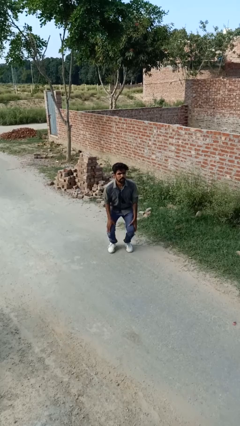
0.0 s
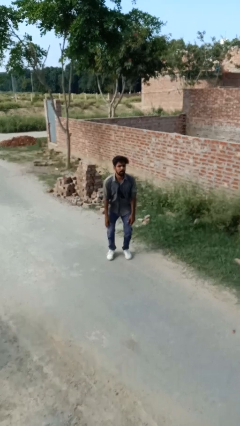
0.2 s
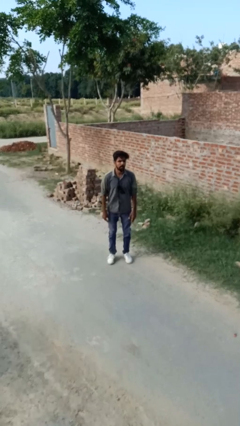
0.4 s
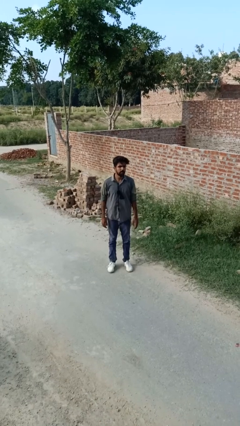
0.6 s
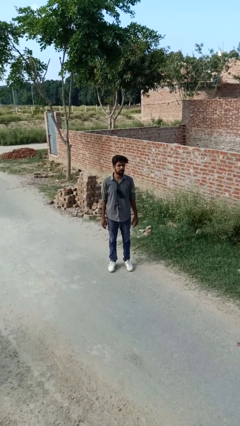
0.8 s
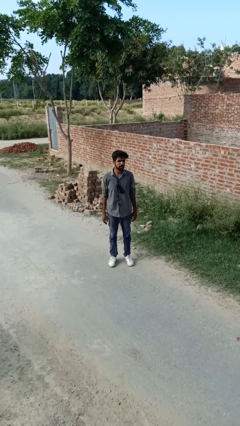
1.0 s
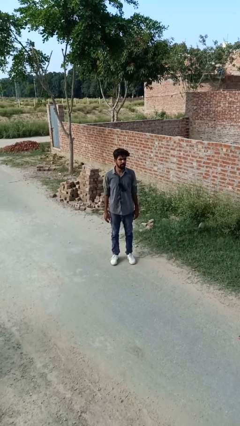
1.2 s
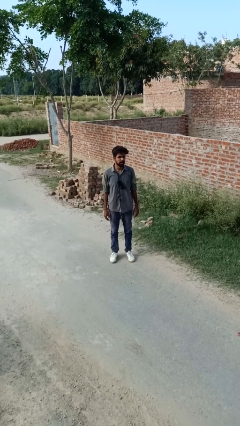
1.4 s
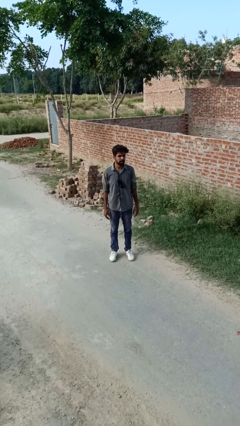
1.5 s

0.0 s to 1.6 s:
person stands up from floor

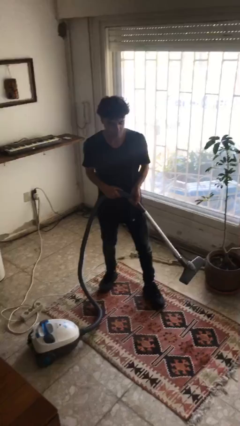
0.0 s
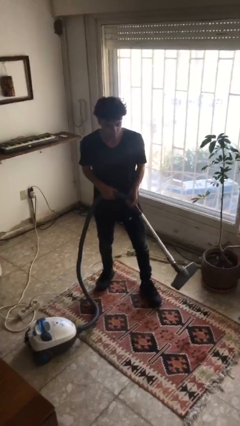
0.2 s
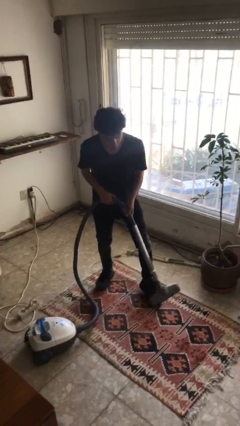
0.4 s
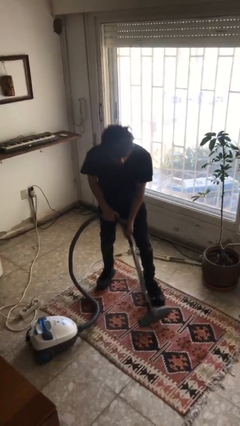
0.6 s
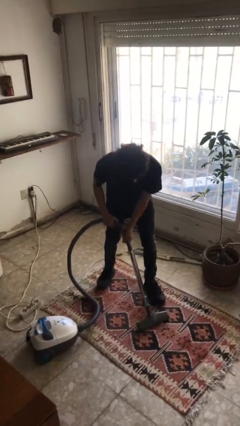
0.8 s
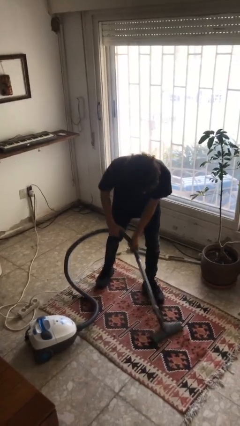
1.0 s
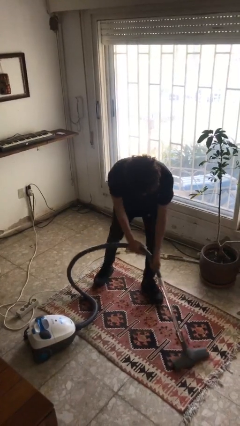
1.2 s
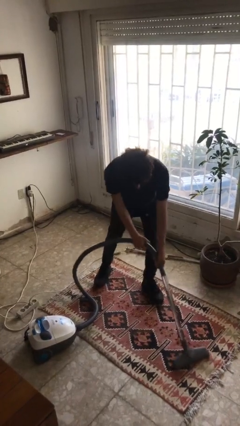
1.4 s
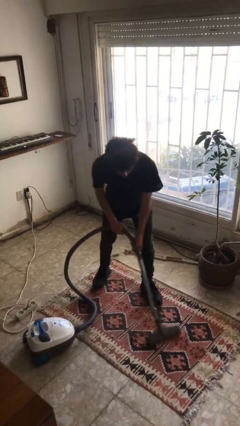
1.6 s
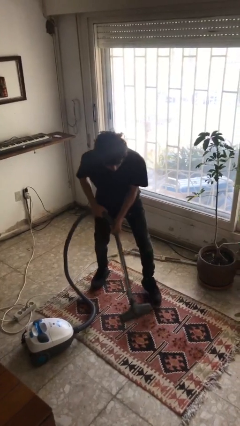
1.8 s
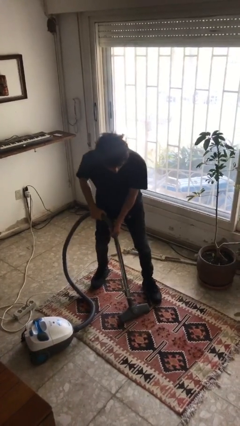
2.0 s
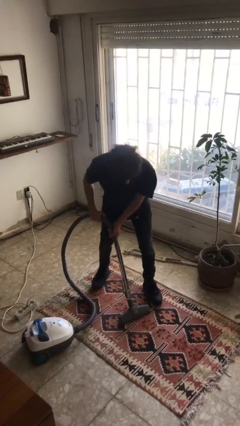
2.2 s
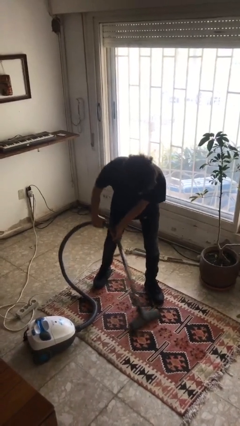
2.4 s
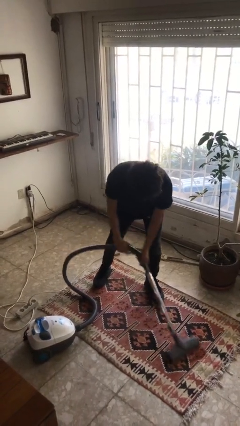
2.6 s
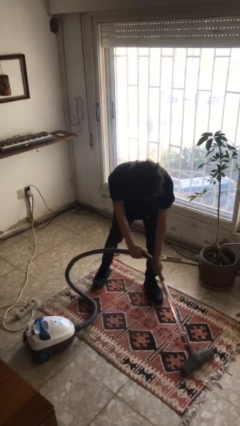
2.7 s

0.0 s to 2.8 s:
person vacuums carpet

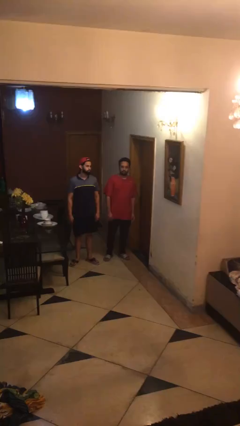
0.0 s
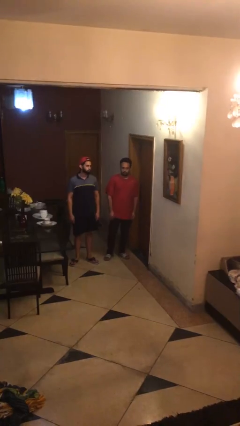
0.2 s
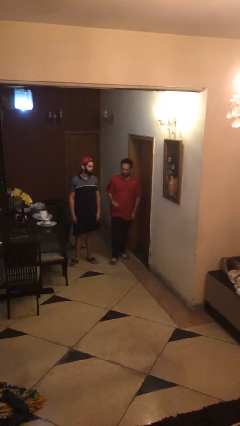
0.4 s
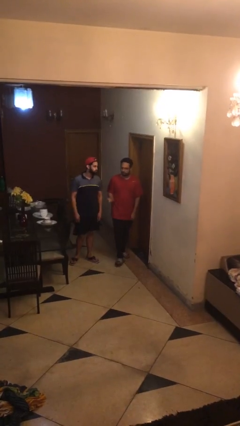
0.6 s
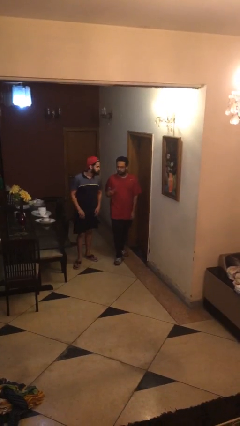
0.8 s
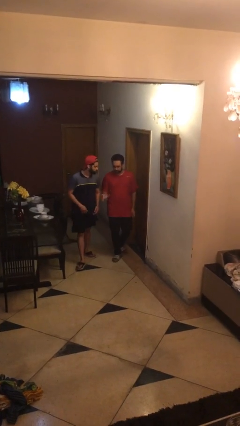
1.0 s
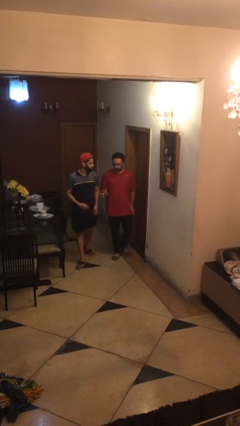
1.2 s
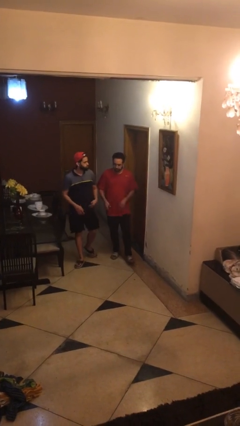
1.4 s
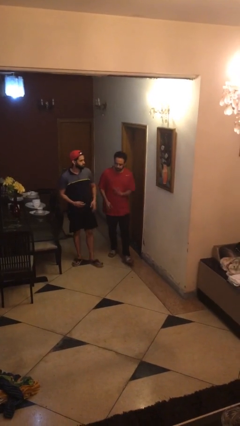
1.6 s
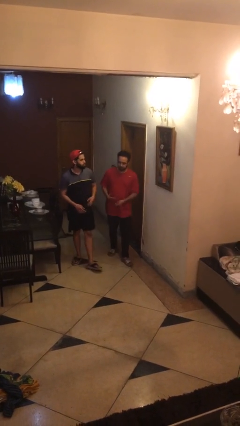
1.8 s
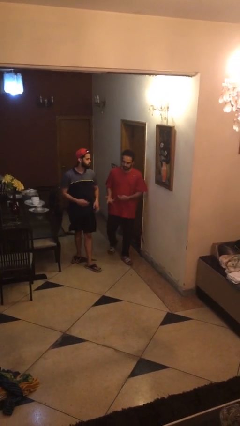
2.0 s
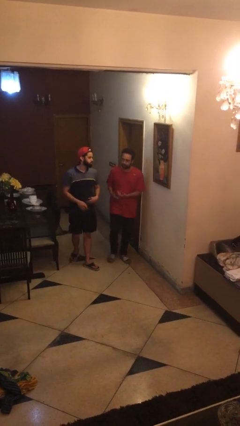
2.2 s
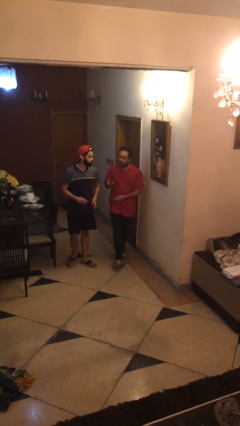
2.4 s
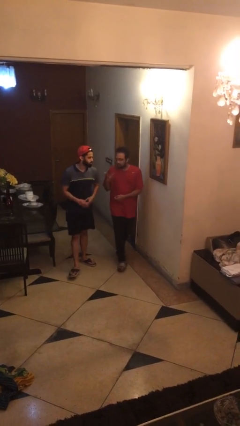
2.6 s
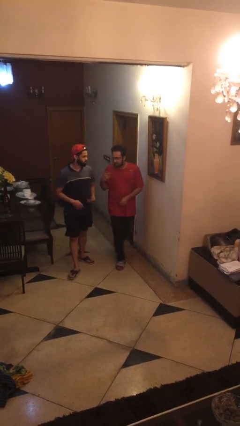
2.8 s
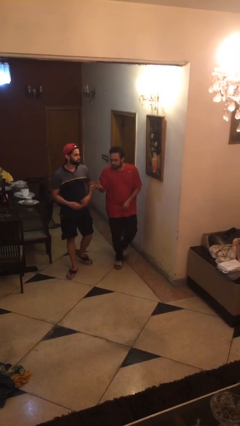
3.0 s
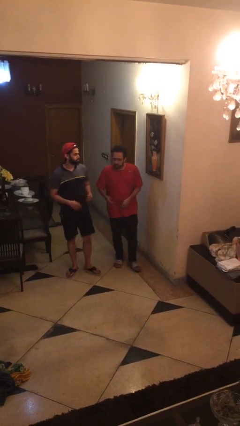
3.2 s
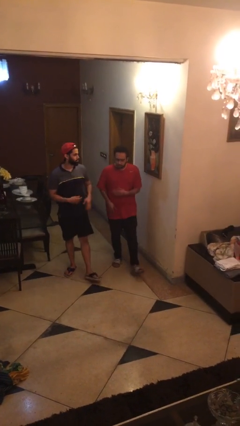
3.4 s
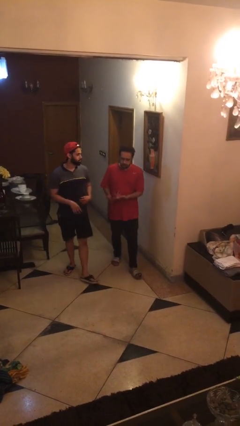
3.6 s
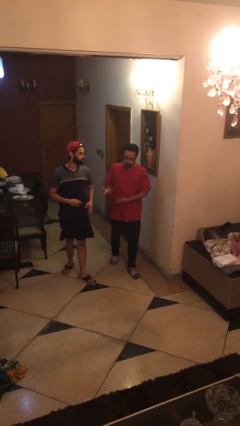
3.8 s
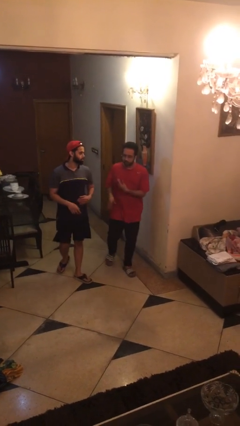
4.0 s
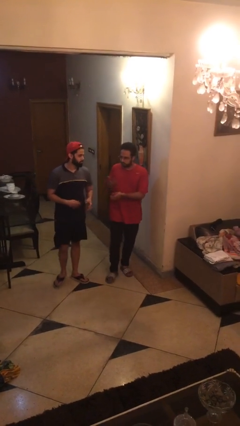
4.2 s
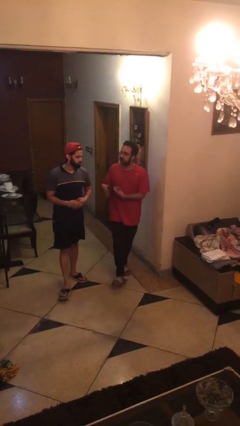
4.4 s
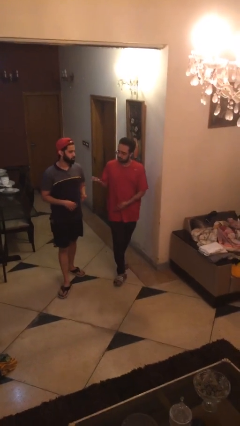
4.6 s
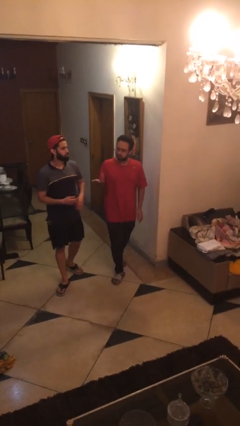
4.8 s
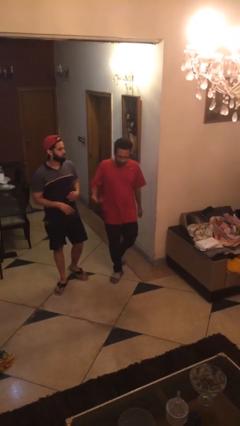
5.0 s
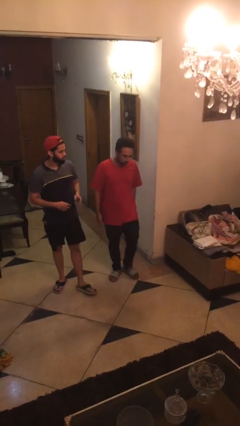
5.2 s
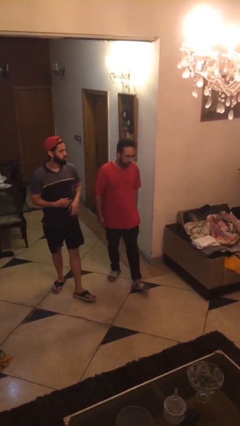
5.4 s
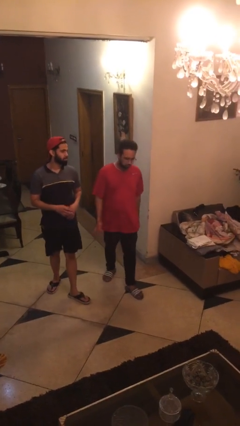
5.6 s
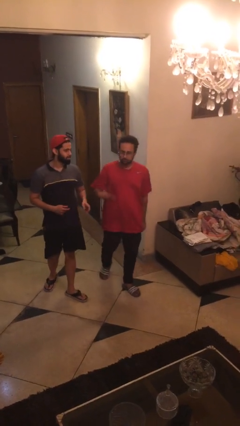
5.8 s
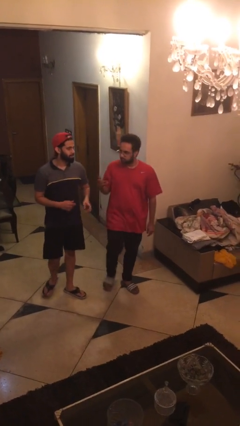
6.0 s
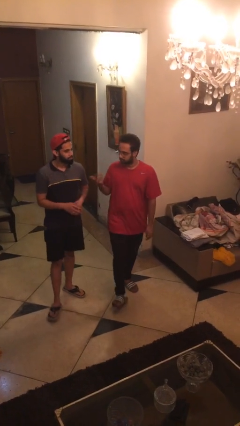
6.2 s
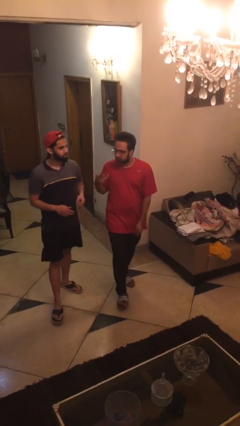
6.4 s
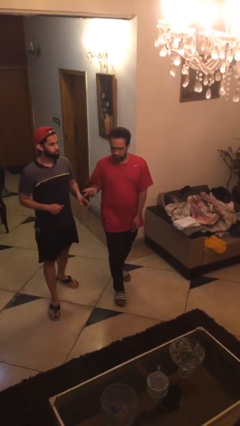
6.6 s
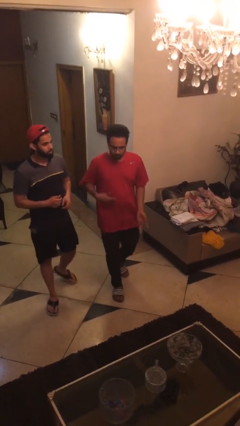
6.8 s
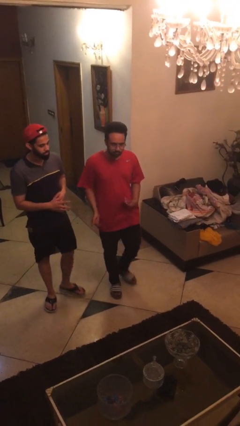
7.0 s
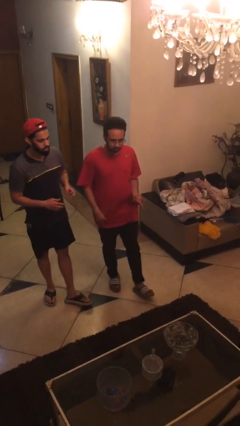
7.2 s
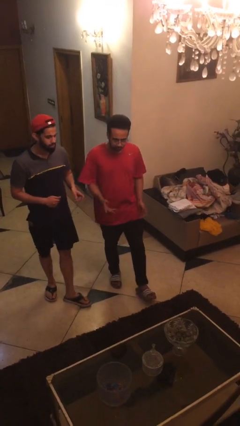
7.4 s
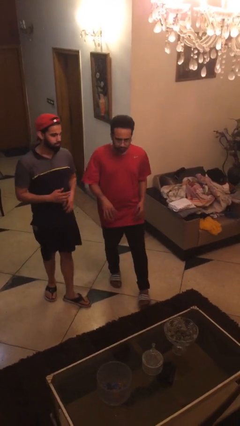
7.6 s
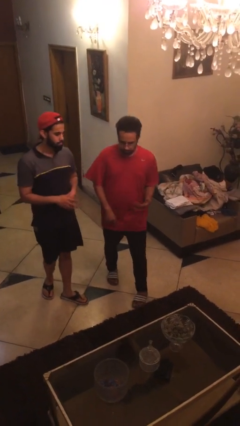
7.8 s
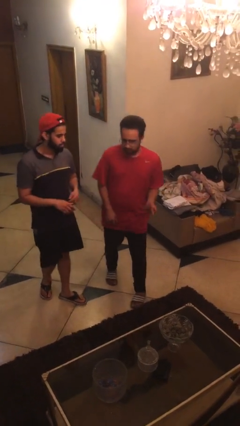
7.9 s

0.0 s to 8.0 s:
person talks to person

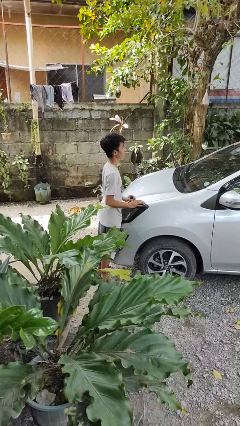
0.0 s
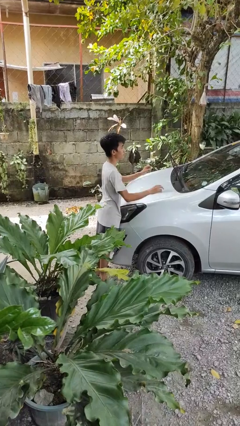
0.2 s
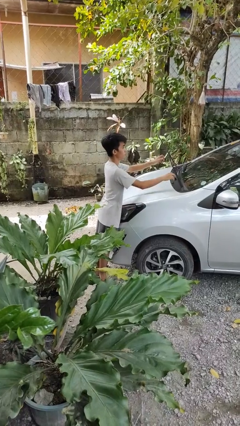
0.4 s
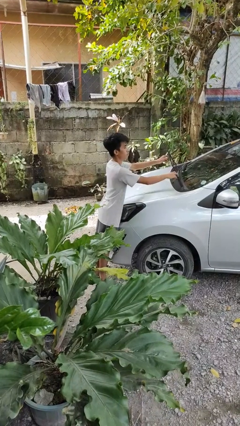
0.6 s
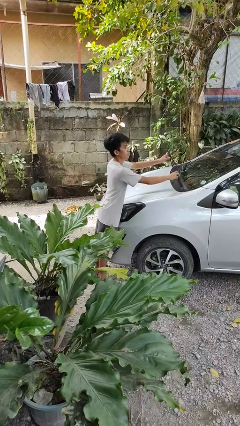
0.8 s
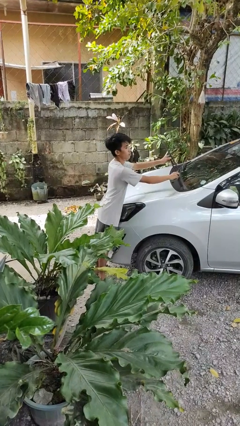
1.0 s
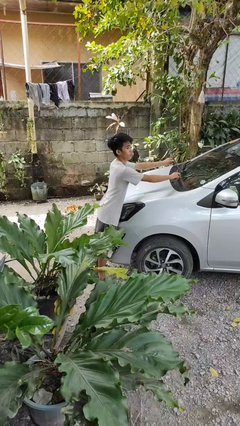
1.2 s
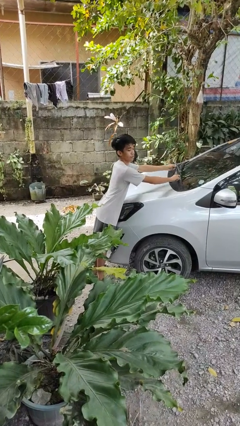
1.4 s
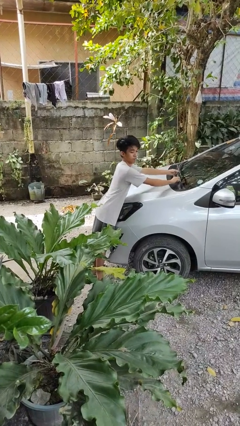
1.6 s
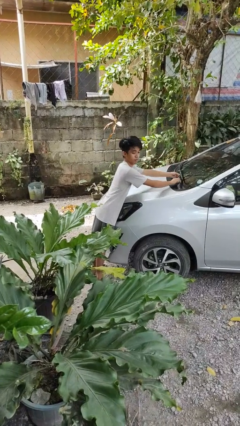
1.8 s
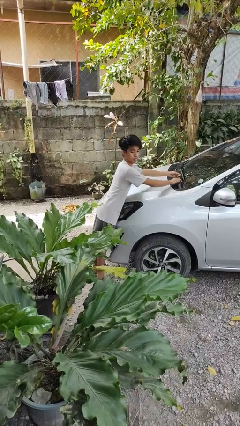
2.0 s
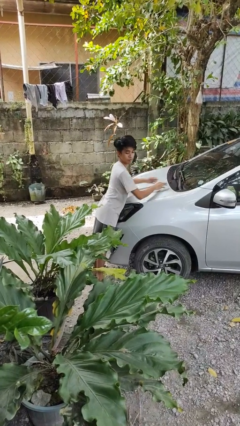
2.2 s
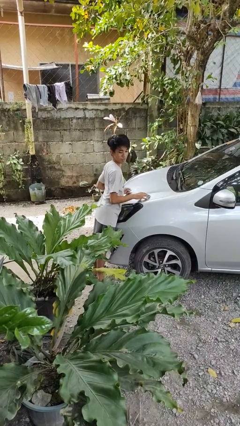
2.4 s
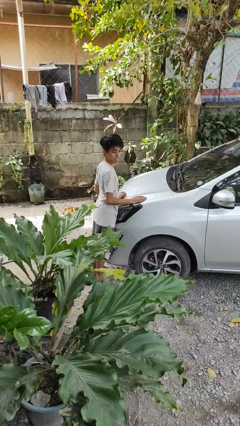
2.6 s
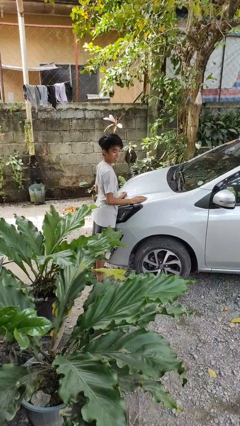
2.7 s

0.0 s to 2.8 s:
person flips down car wipers

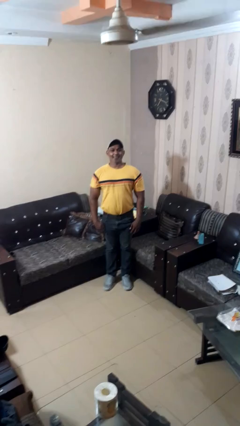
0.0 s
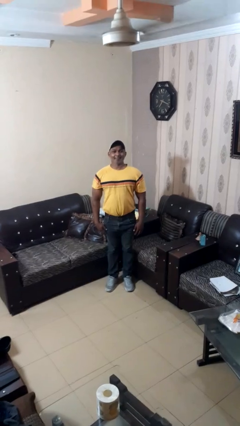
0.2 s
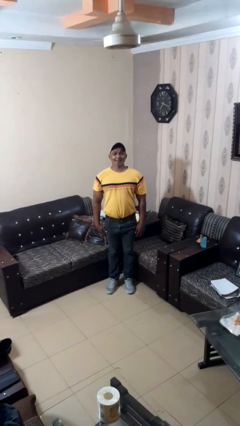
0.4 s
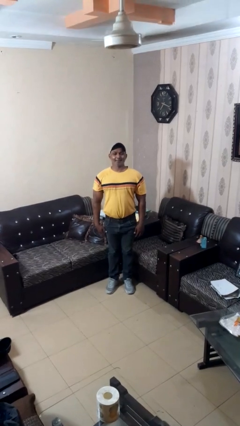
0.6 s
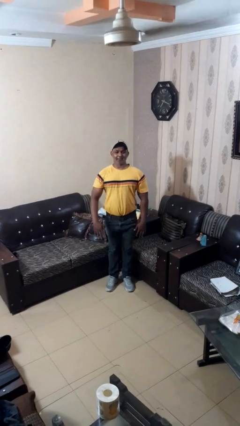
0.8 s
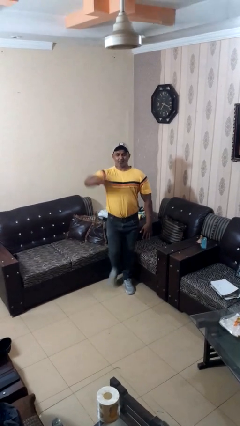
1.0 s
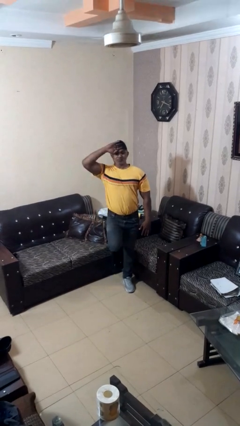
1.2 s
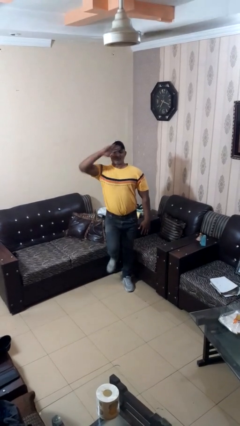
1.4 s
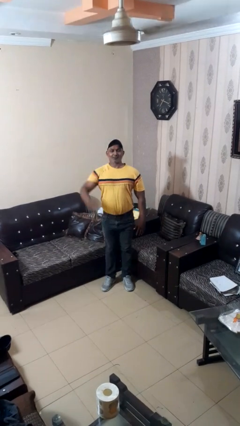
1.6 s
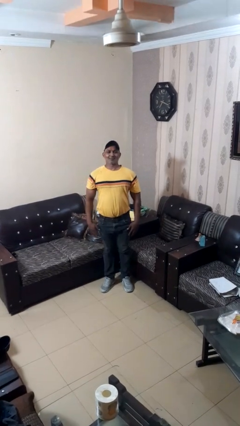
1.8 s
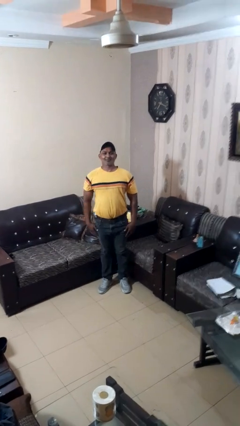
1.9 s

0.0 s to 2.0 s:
person salutes

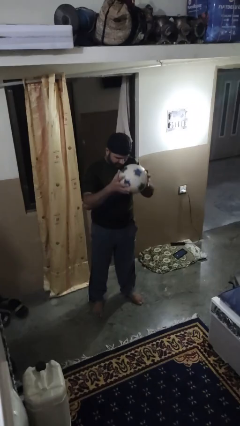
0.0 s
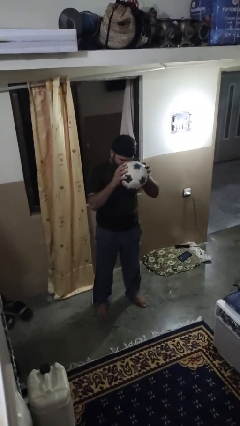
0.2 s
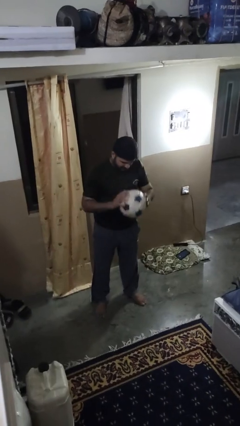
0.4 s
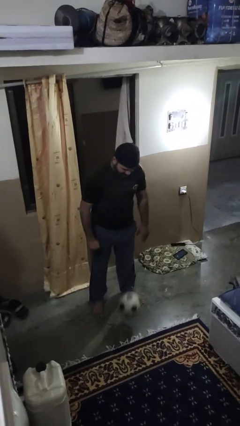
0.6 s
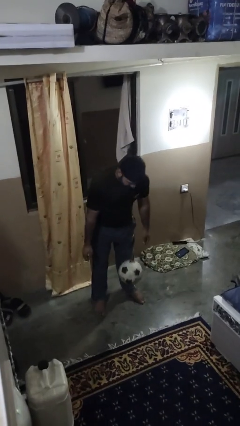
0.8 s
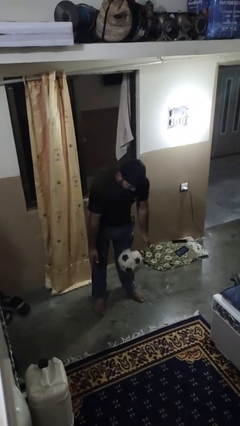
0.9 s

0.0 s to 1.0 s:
person bounces ball on floor
